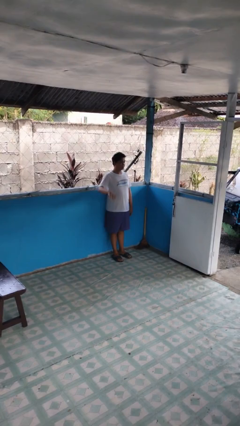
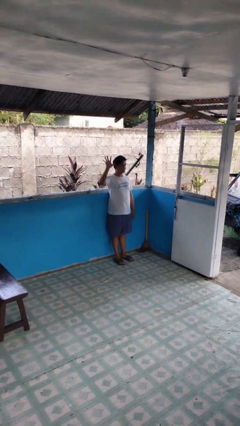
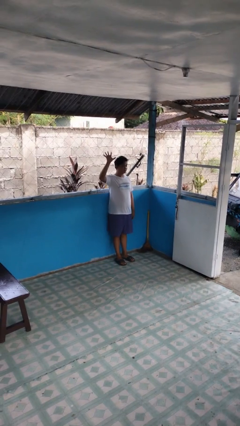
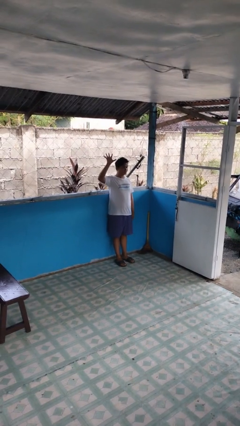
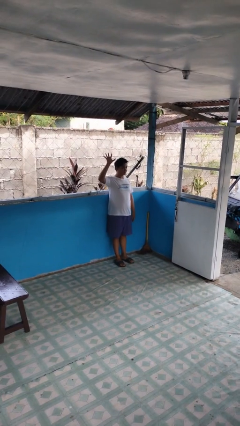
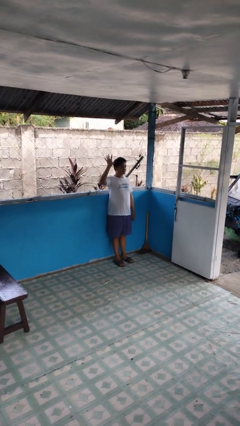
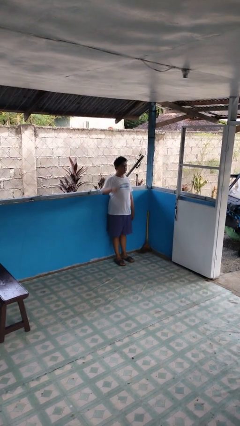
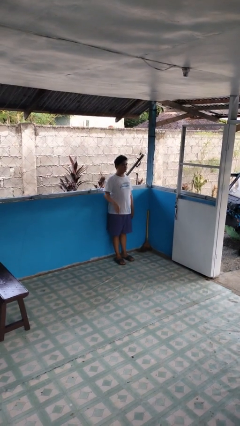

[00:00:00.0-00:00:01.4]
person gestures number five

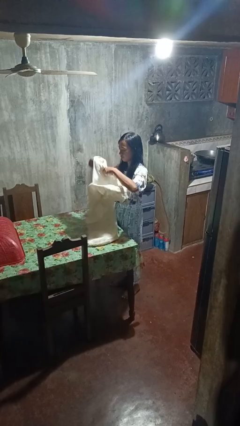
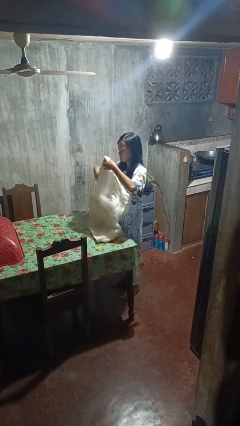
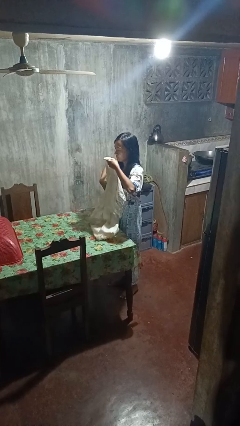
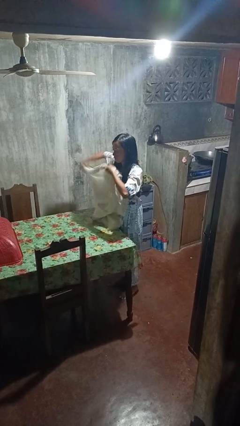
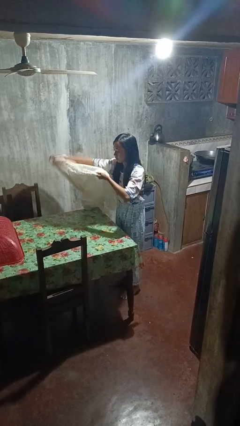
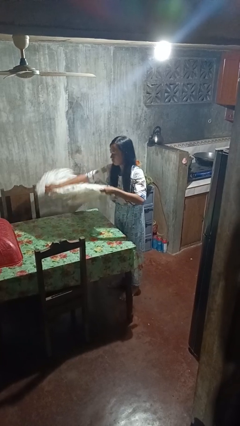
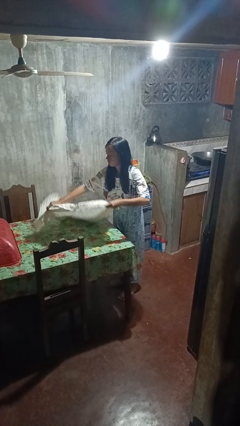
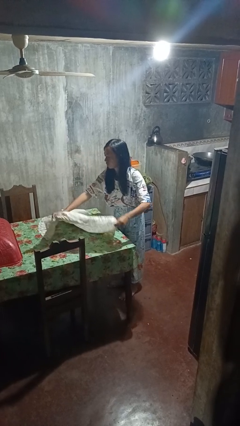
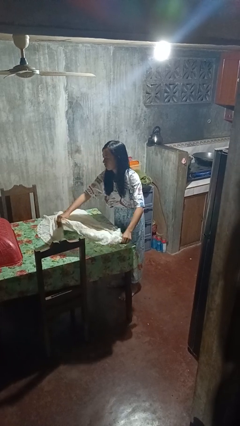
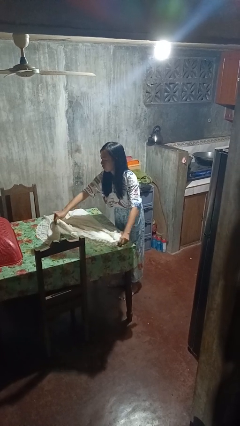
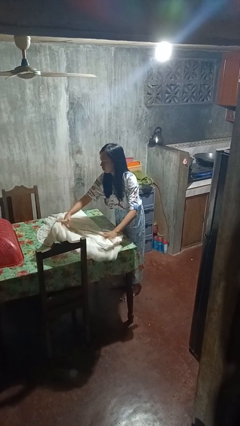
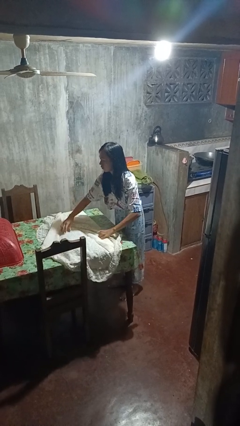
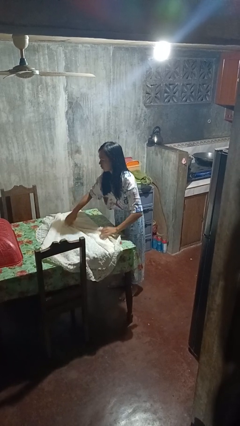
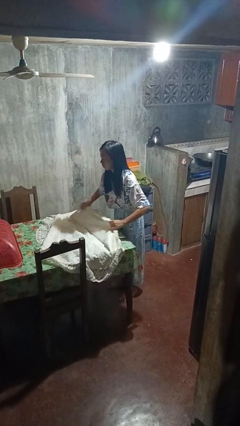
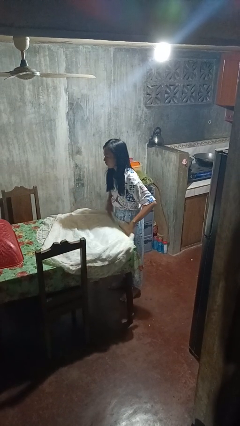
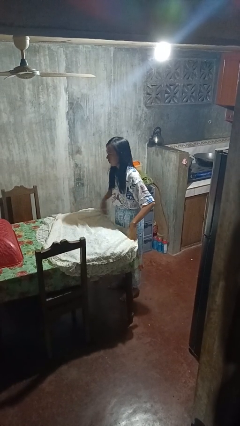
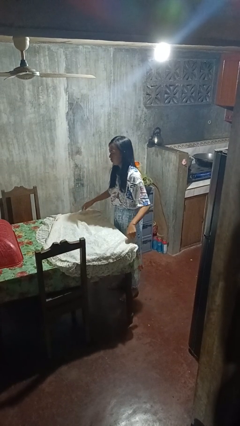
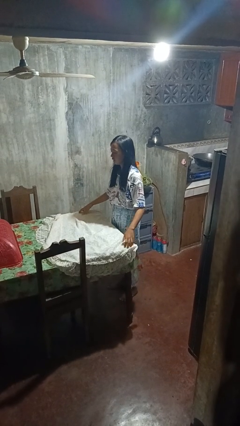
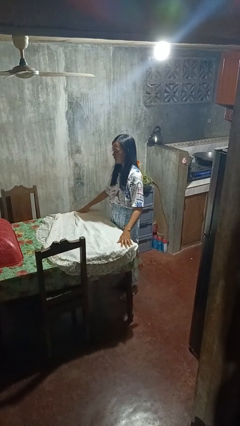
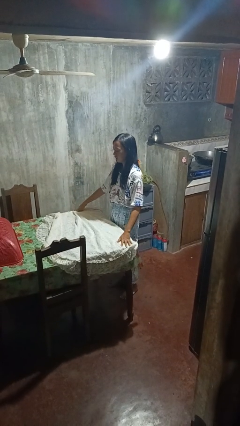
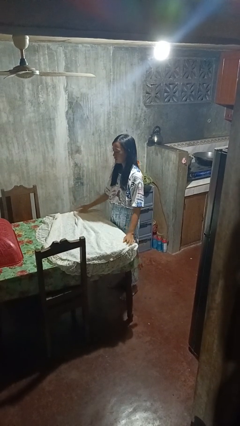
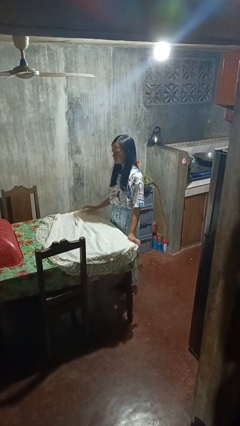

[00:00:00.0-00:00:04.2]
person spreads tablecloth

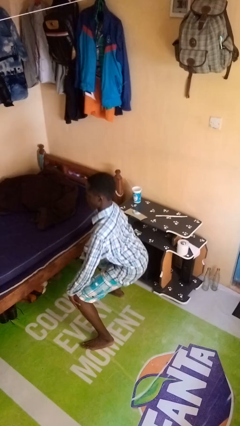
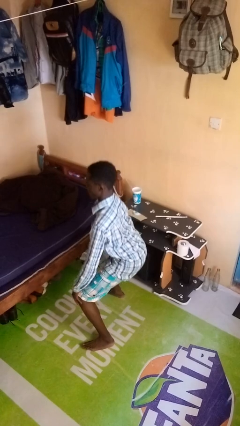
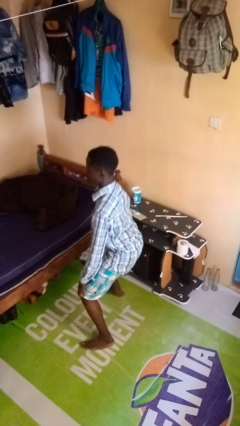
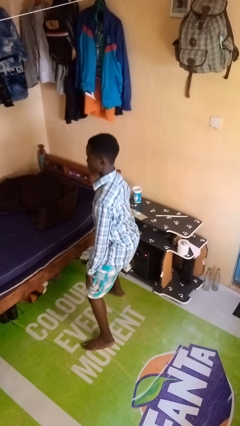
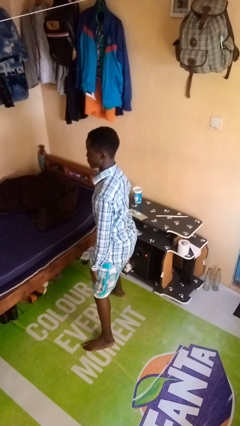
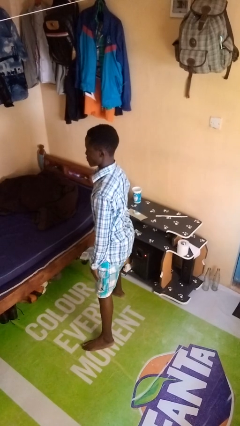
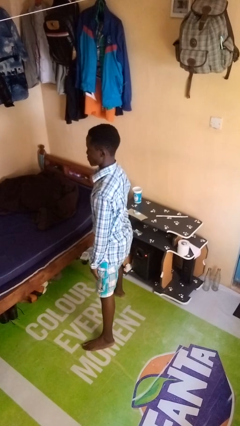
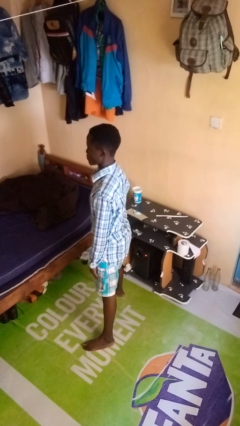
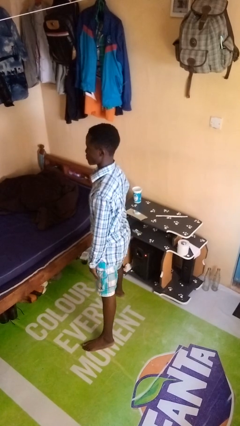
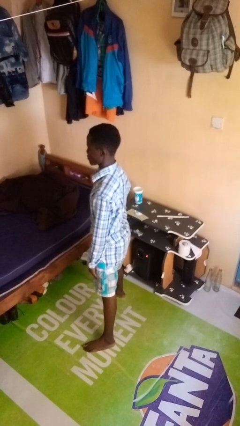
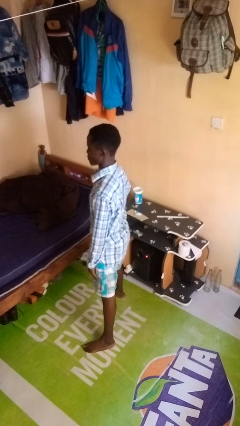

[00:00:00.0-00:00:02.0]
person stands up

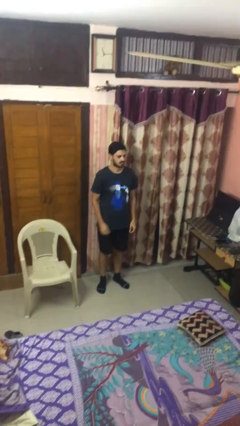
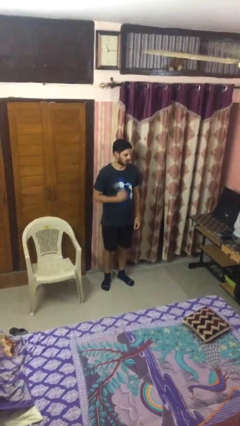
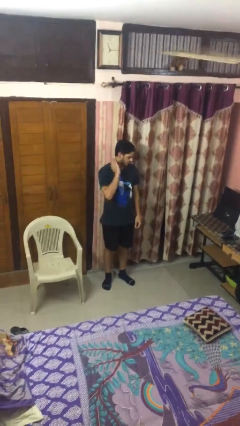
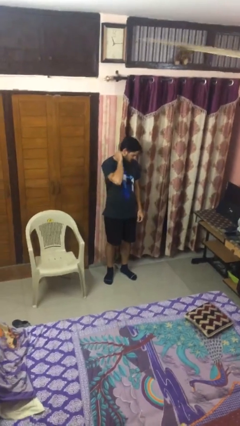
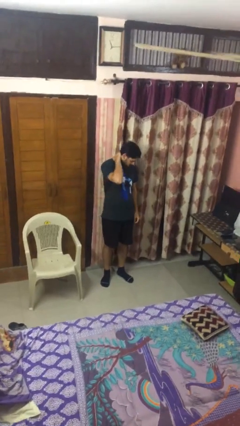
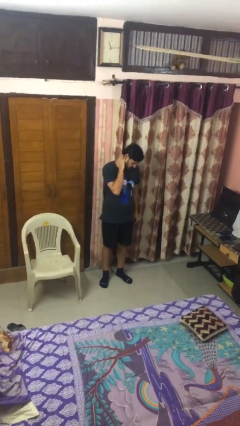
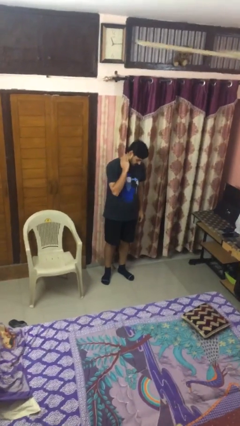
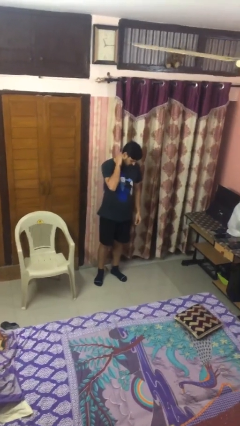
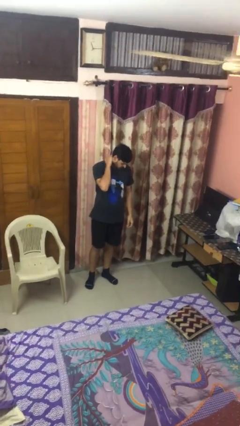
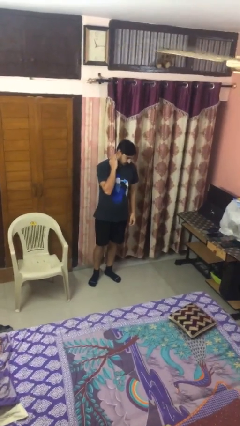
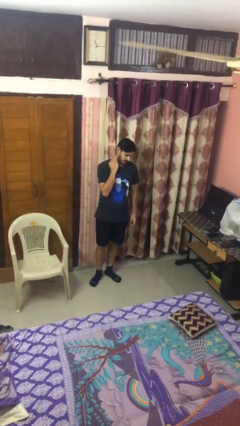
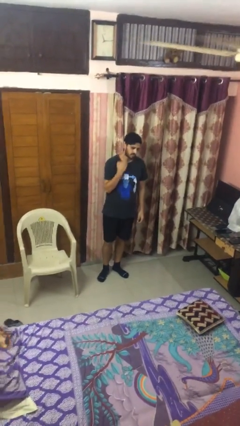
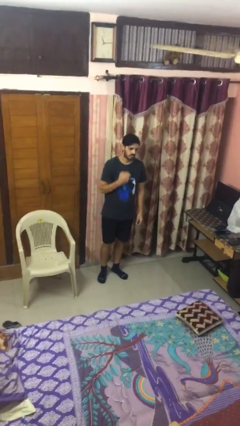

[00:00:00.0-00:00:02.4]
person rubs neck

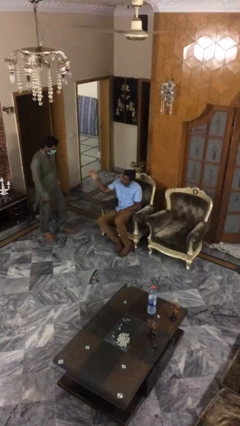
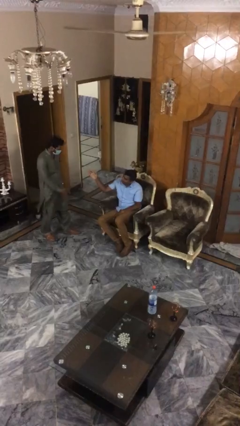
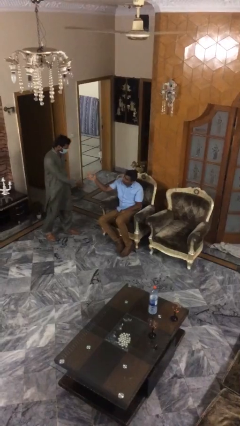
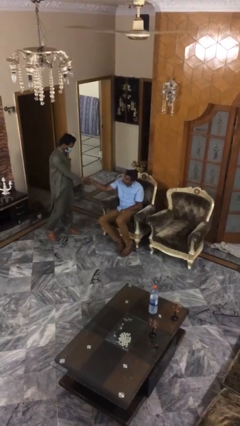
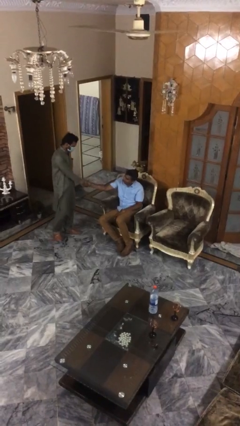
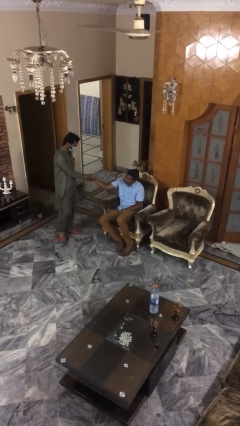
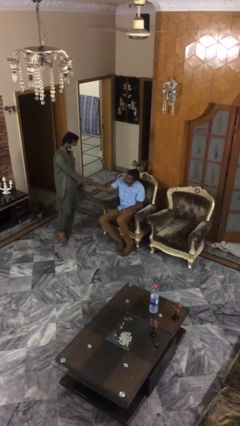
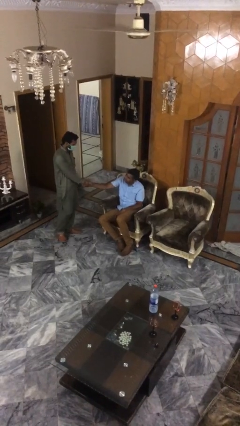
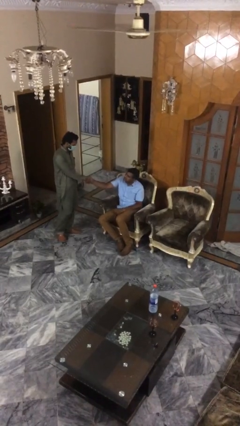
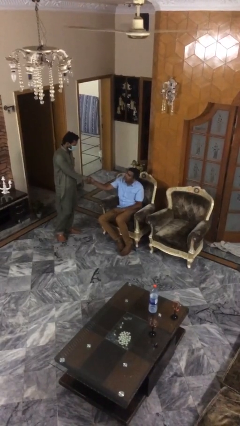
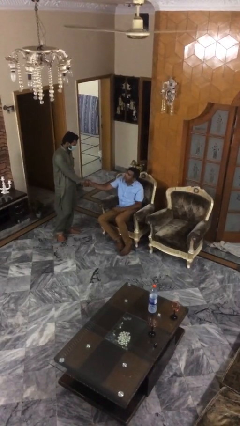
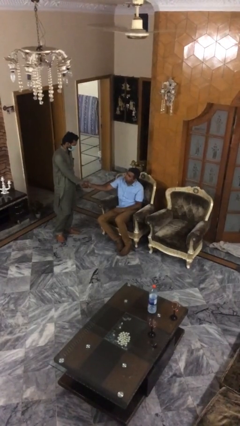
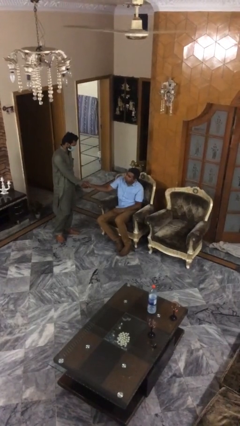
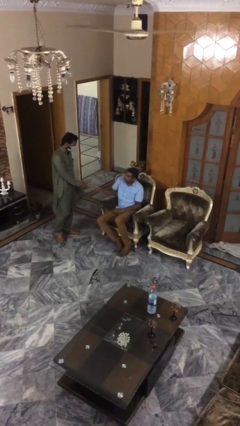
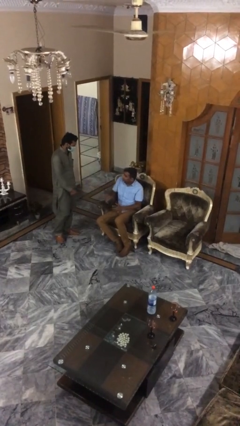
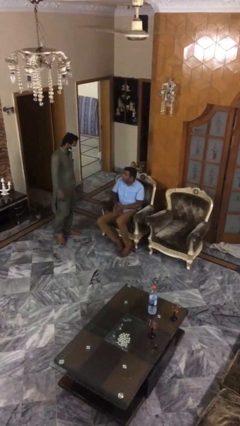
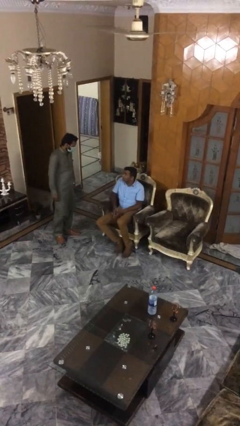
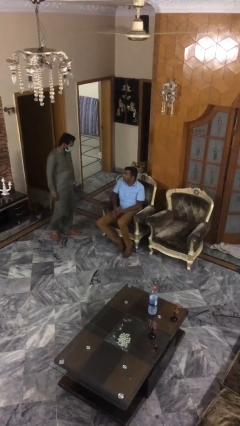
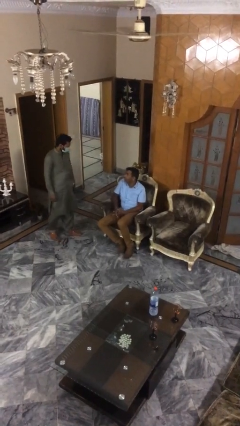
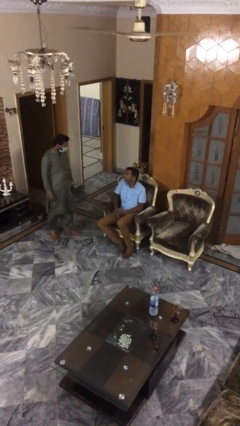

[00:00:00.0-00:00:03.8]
person shakes hand

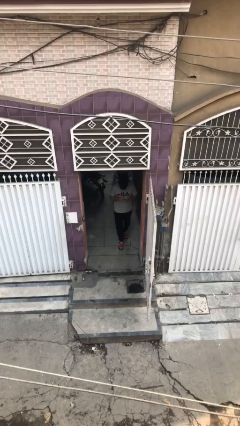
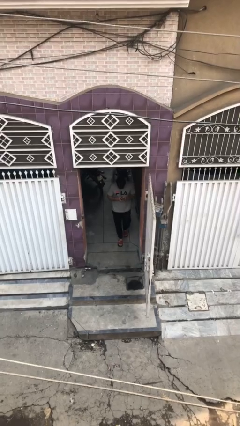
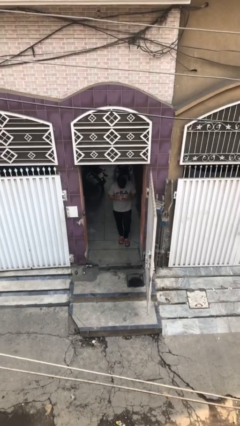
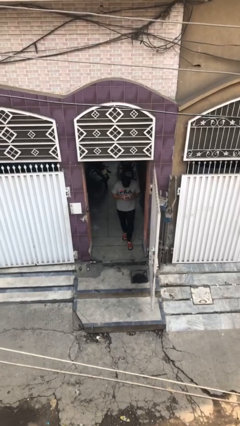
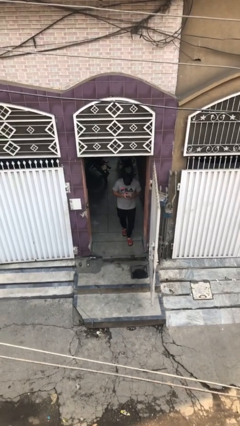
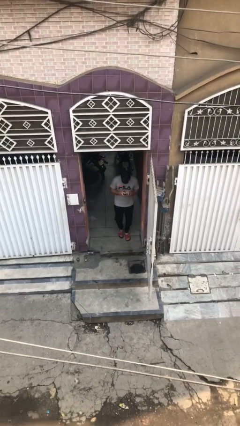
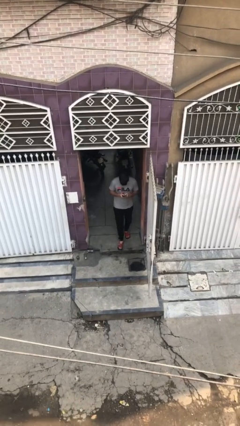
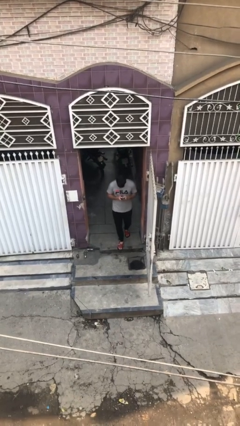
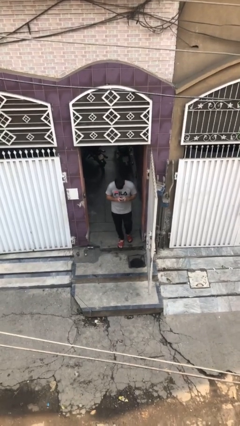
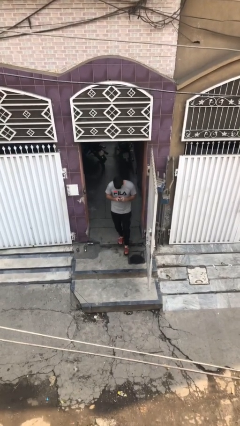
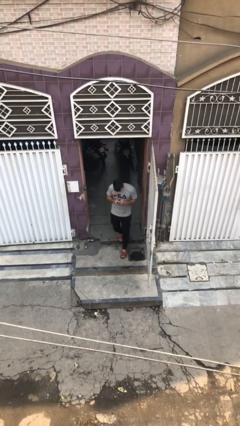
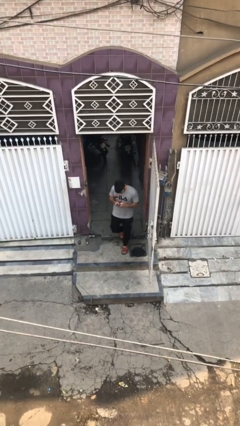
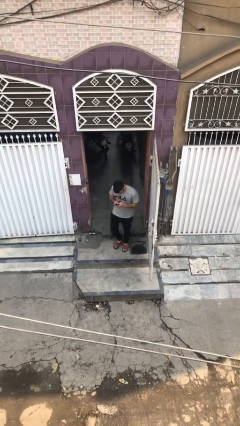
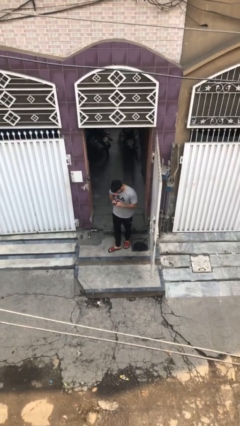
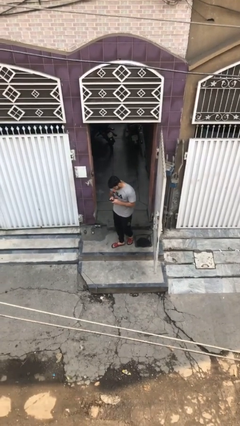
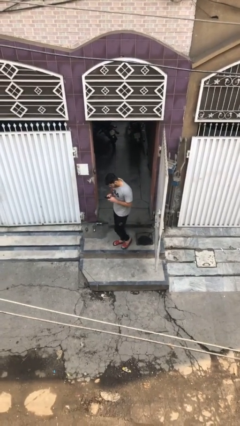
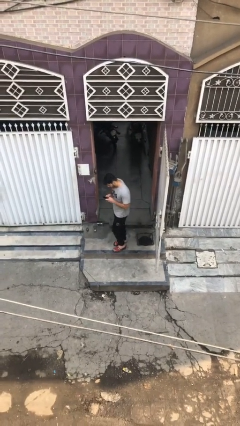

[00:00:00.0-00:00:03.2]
person enters scene through structure

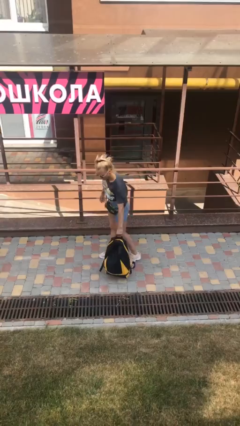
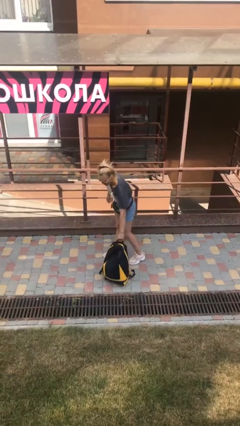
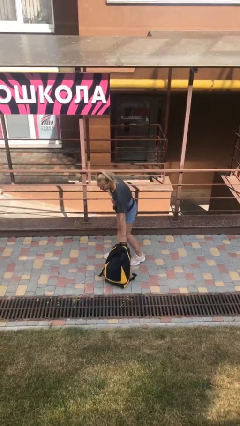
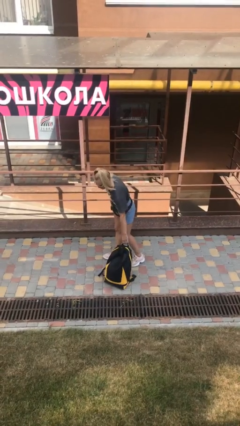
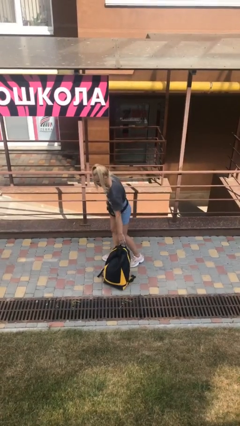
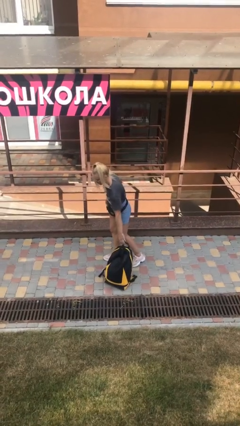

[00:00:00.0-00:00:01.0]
person puts down object on floor
